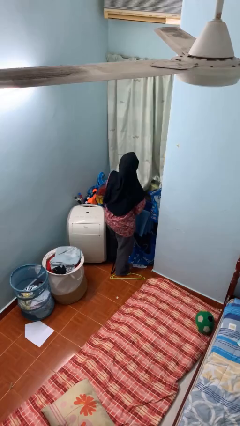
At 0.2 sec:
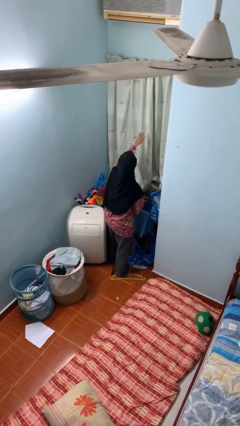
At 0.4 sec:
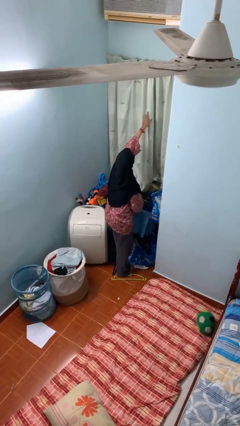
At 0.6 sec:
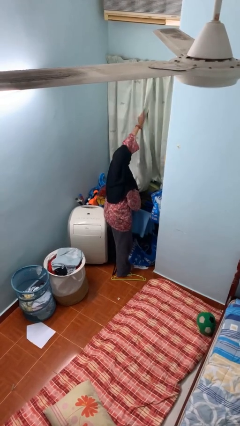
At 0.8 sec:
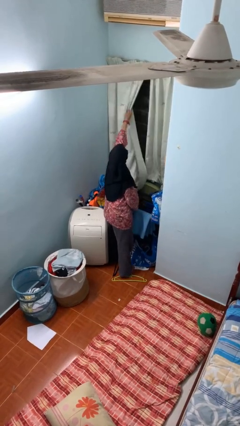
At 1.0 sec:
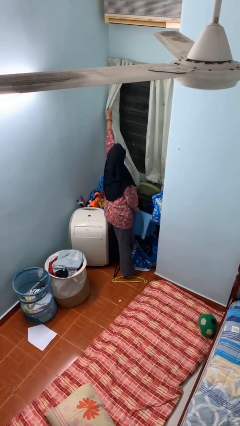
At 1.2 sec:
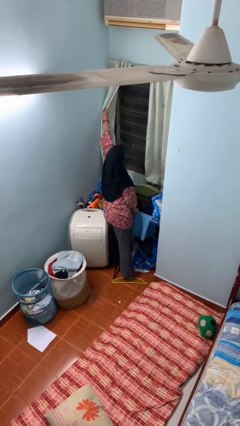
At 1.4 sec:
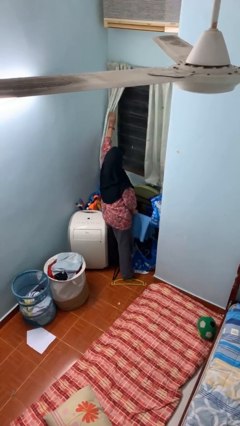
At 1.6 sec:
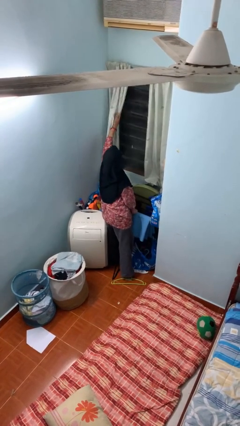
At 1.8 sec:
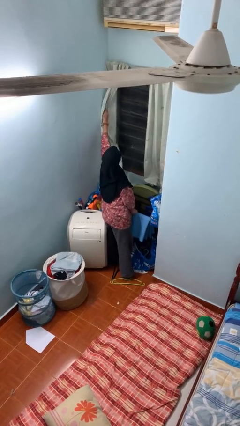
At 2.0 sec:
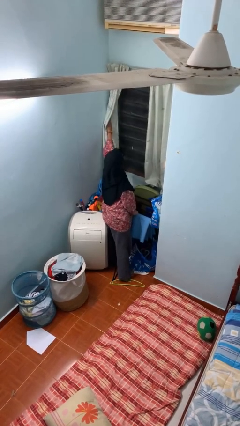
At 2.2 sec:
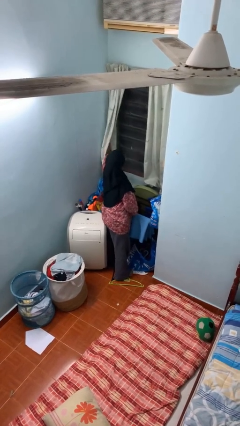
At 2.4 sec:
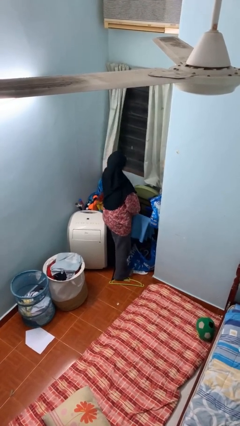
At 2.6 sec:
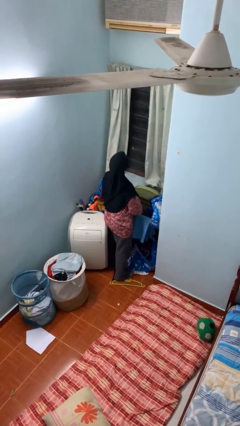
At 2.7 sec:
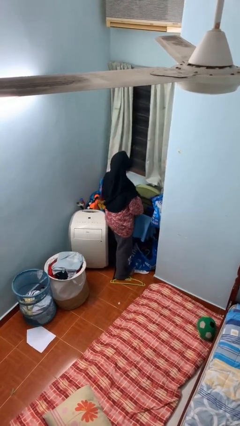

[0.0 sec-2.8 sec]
person opens curtains

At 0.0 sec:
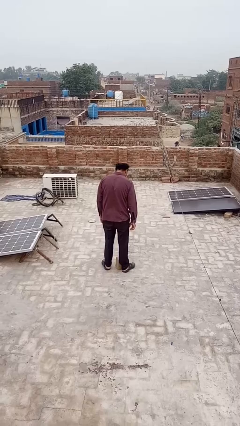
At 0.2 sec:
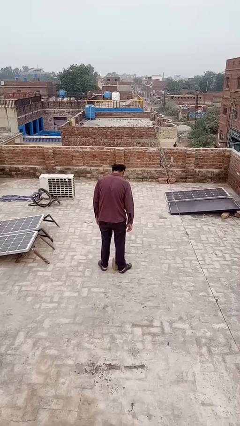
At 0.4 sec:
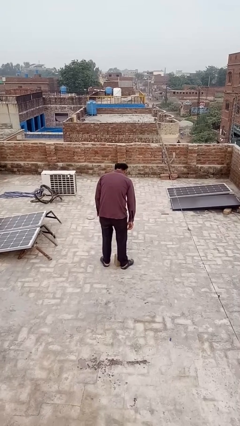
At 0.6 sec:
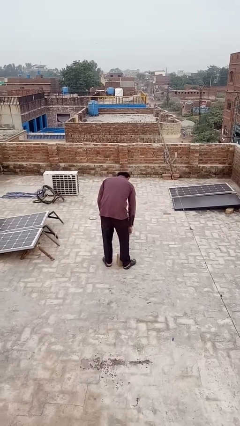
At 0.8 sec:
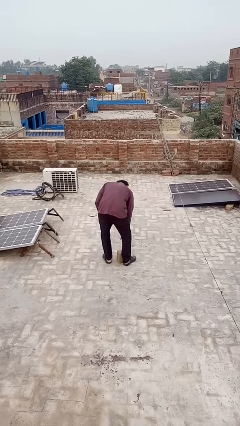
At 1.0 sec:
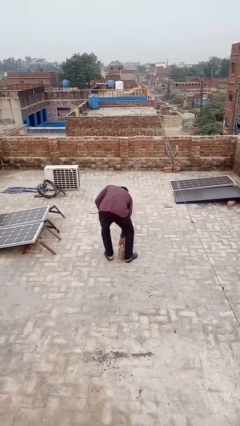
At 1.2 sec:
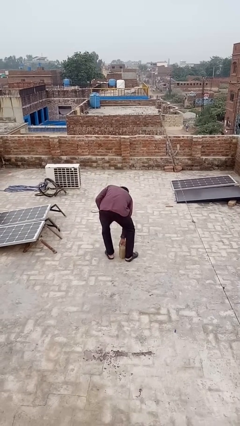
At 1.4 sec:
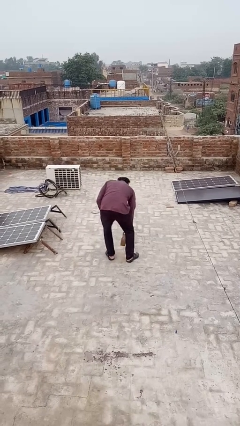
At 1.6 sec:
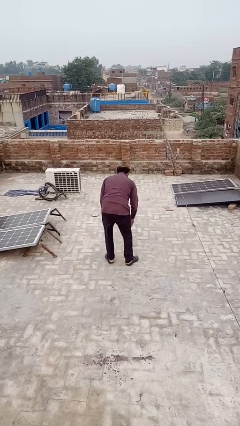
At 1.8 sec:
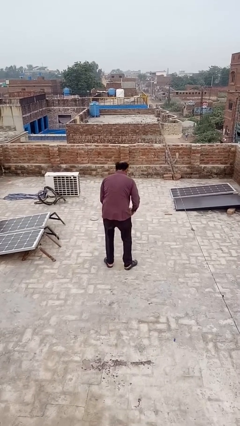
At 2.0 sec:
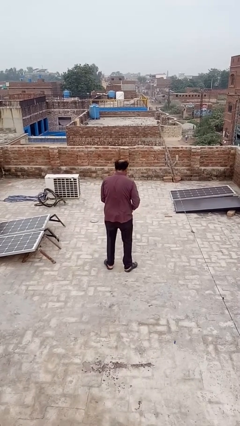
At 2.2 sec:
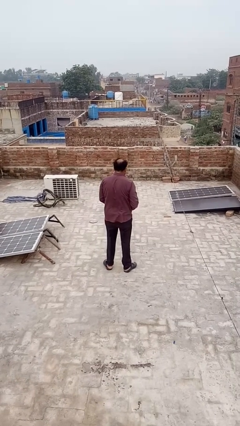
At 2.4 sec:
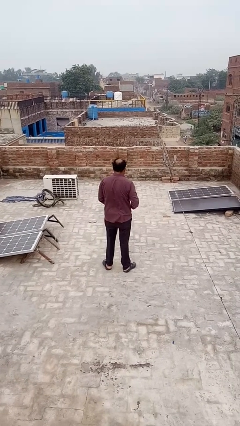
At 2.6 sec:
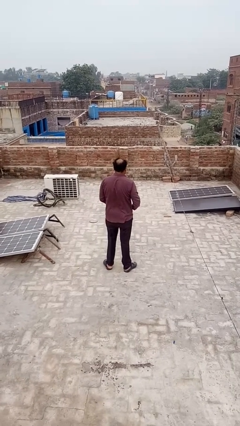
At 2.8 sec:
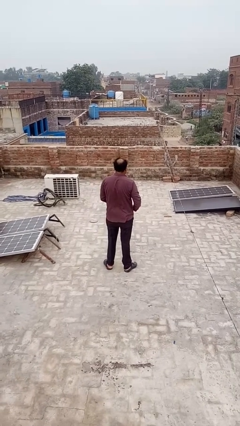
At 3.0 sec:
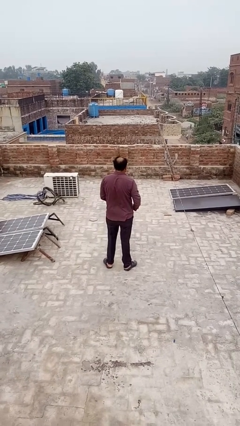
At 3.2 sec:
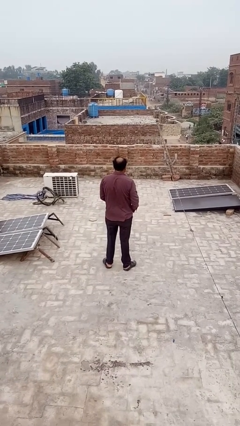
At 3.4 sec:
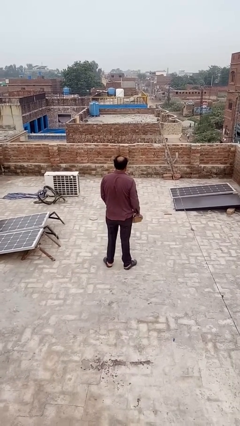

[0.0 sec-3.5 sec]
person picks up object from floor

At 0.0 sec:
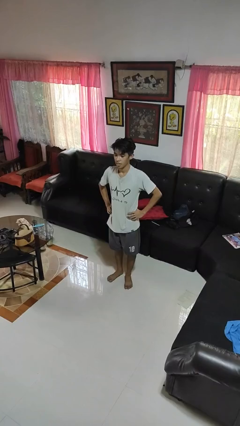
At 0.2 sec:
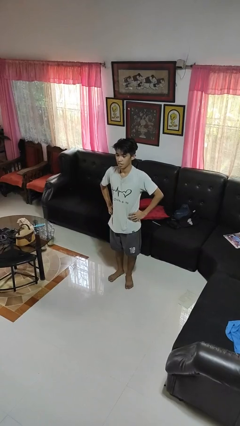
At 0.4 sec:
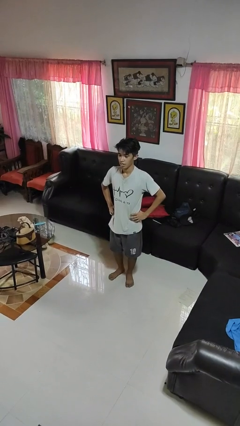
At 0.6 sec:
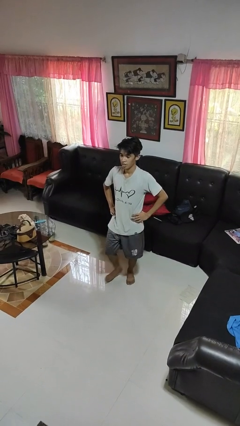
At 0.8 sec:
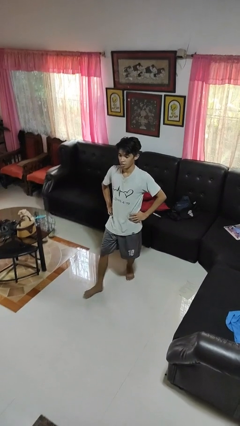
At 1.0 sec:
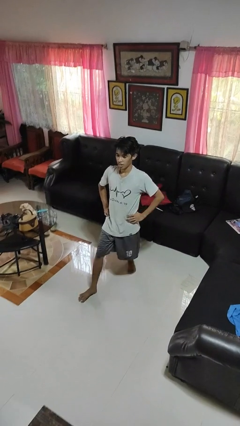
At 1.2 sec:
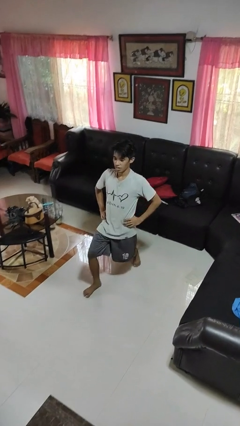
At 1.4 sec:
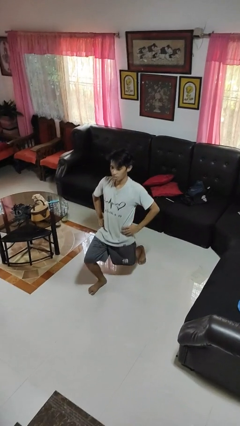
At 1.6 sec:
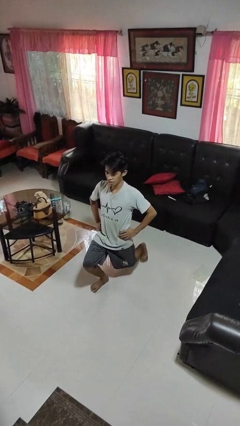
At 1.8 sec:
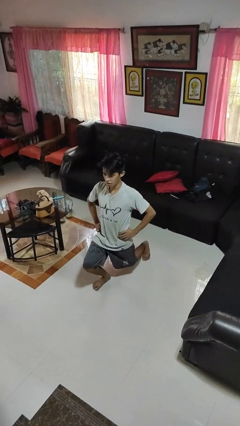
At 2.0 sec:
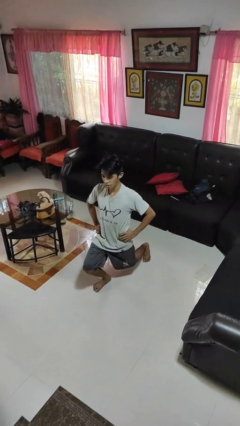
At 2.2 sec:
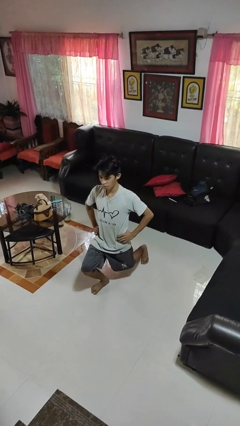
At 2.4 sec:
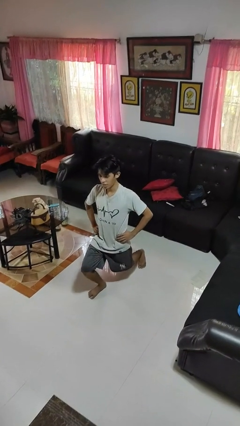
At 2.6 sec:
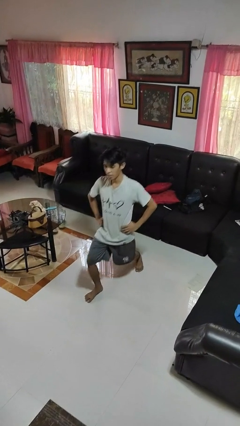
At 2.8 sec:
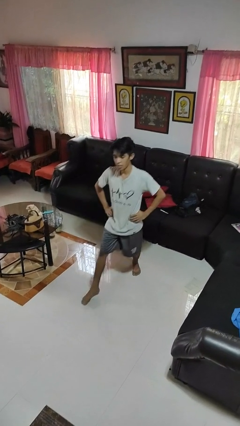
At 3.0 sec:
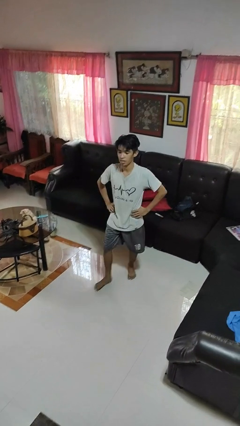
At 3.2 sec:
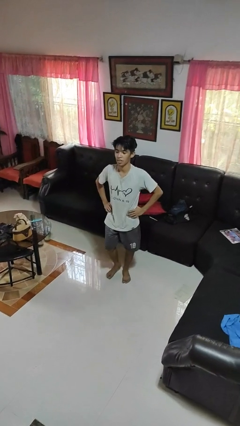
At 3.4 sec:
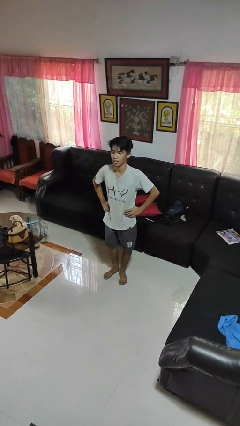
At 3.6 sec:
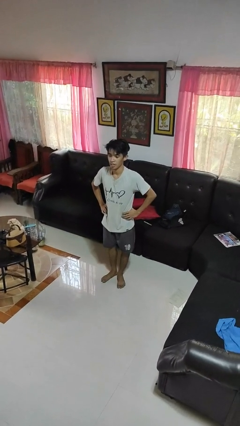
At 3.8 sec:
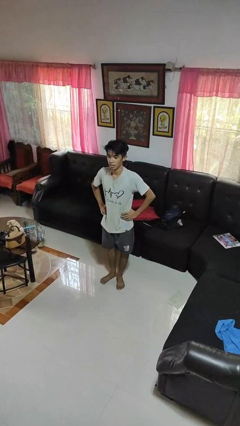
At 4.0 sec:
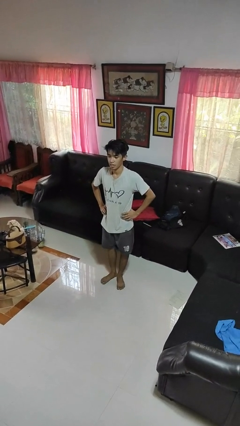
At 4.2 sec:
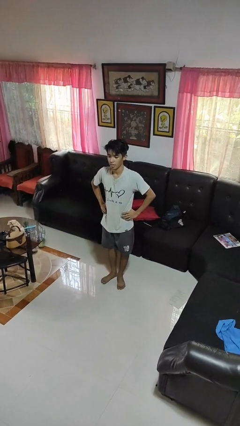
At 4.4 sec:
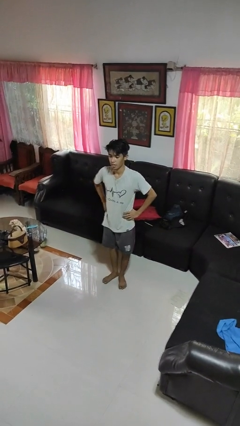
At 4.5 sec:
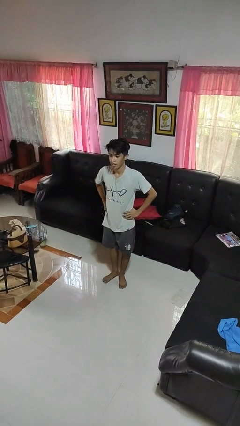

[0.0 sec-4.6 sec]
person exercises with lunges

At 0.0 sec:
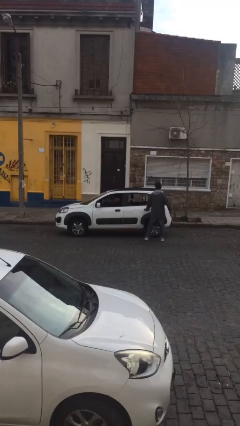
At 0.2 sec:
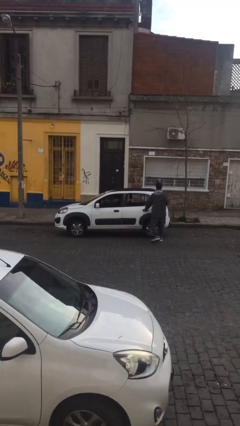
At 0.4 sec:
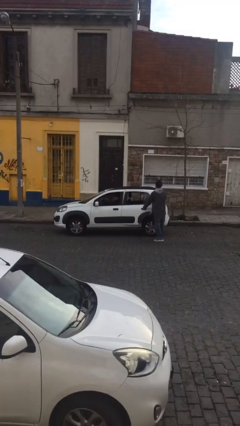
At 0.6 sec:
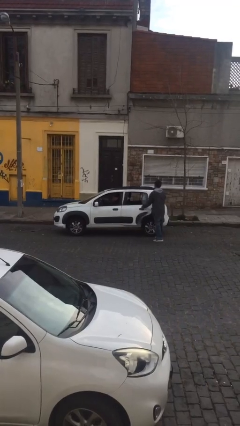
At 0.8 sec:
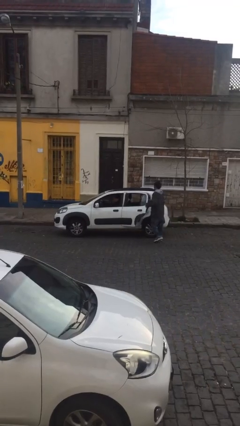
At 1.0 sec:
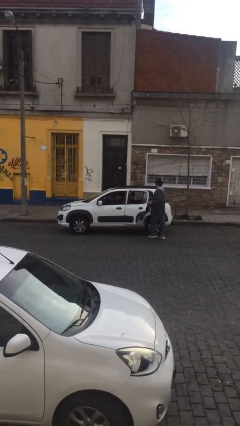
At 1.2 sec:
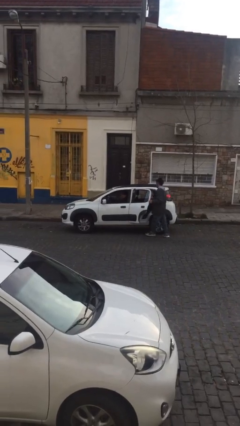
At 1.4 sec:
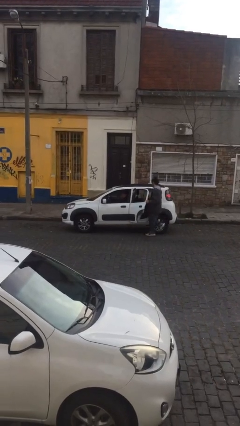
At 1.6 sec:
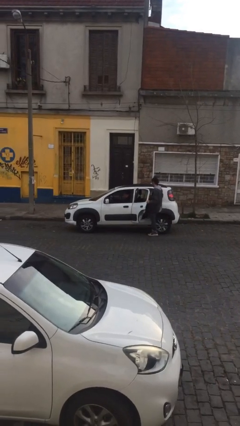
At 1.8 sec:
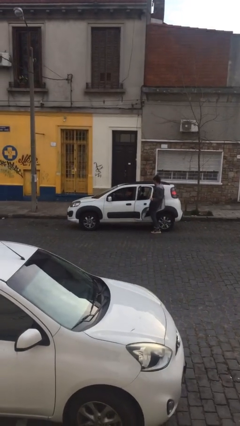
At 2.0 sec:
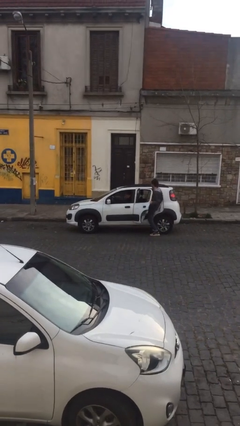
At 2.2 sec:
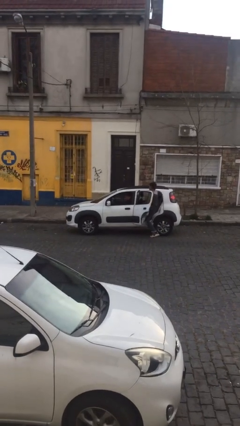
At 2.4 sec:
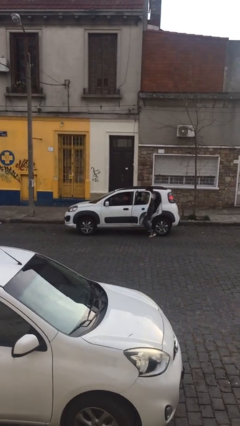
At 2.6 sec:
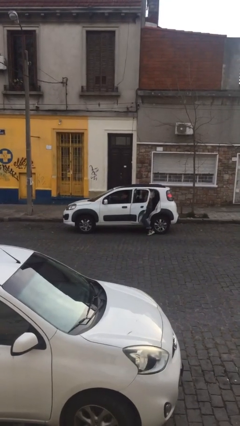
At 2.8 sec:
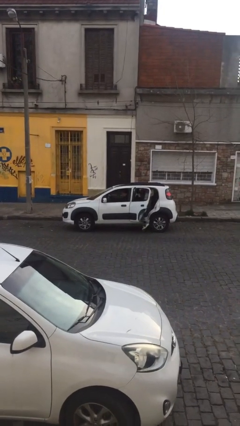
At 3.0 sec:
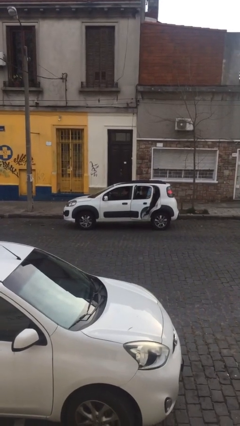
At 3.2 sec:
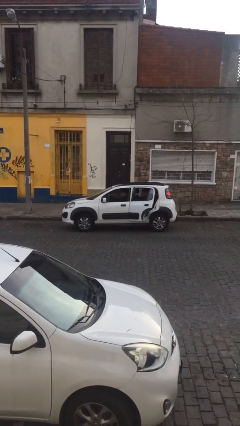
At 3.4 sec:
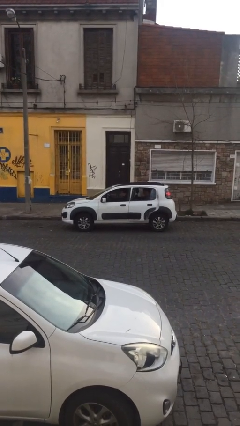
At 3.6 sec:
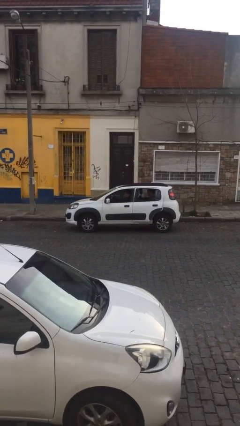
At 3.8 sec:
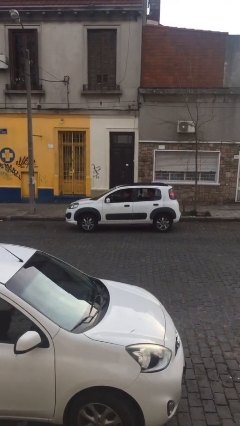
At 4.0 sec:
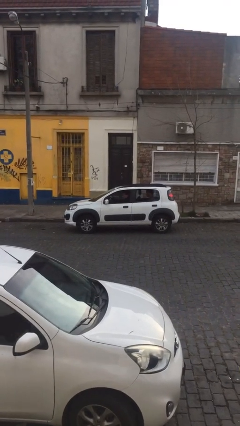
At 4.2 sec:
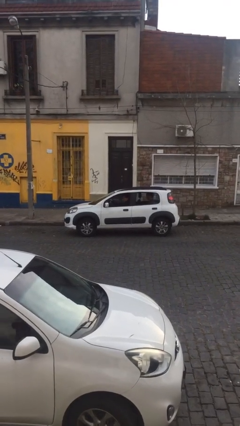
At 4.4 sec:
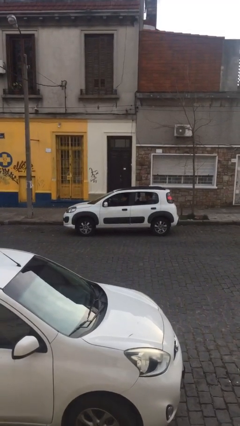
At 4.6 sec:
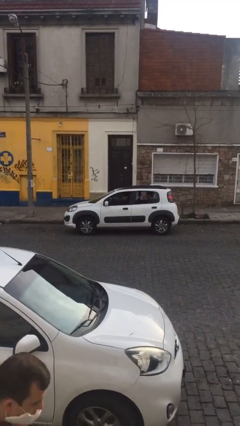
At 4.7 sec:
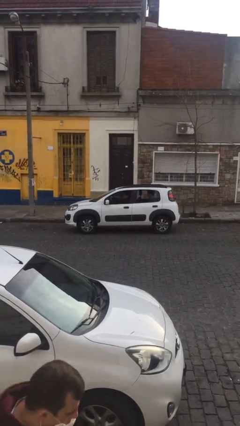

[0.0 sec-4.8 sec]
car picks up person

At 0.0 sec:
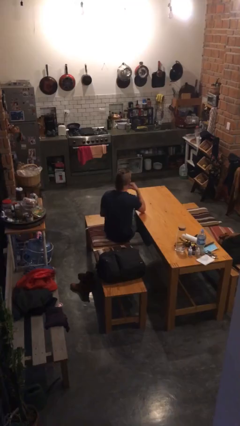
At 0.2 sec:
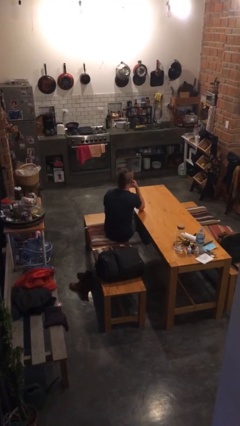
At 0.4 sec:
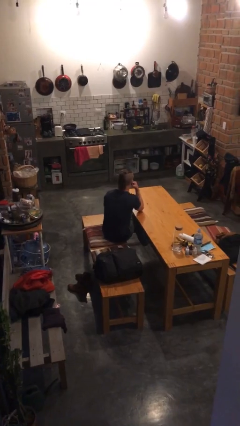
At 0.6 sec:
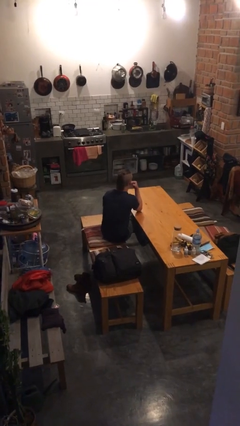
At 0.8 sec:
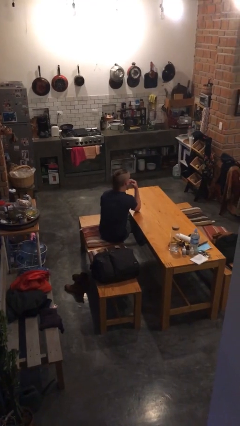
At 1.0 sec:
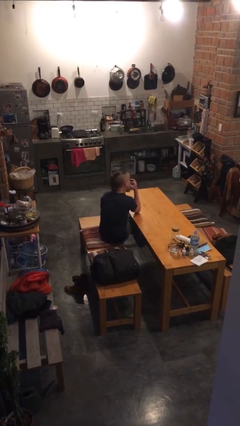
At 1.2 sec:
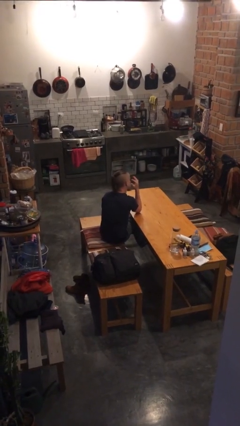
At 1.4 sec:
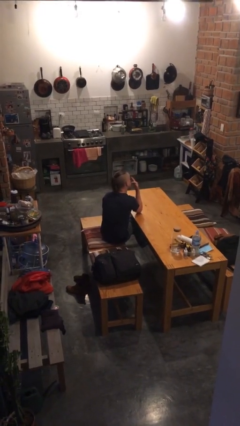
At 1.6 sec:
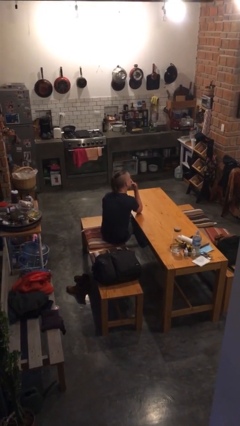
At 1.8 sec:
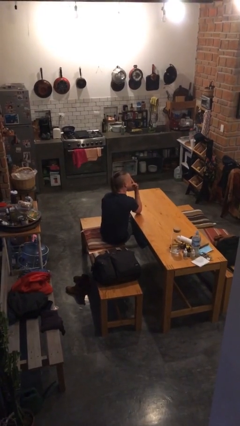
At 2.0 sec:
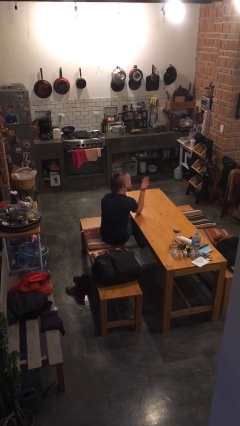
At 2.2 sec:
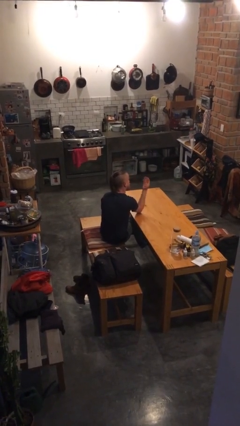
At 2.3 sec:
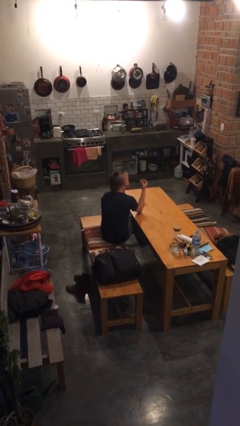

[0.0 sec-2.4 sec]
person licks fingers
